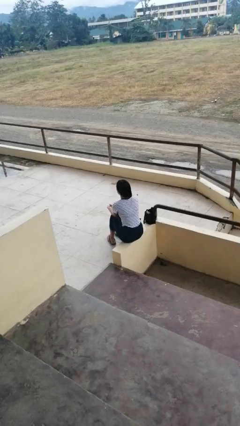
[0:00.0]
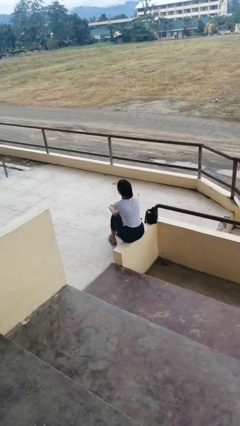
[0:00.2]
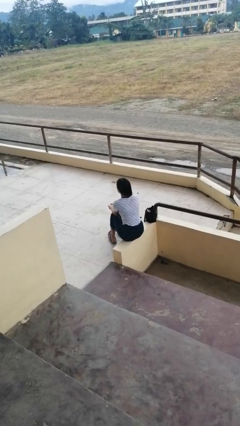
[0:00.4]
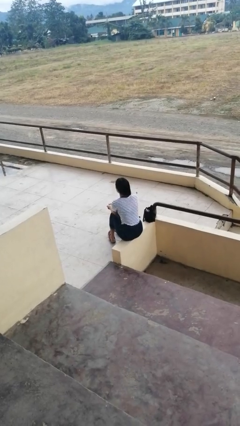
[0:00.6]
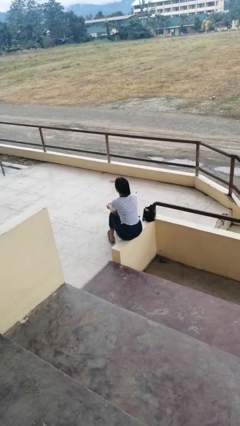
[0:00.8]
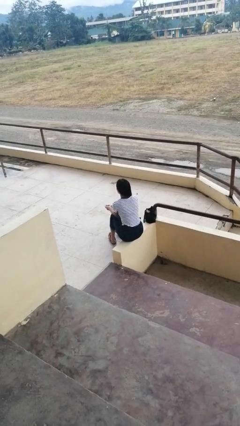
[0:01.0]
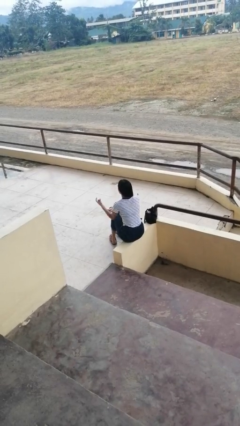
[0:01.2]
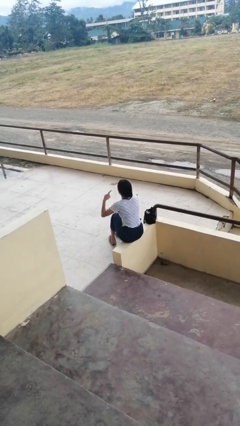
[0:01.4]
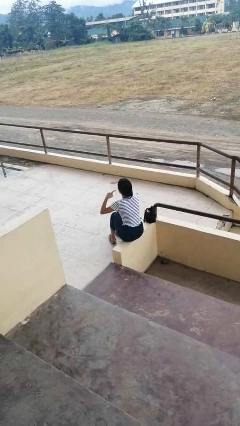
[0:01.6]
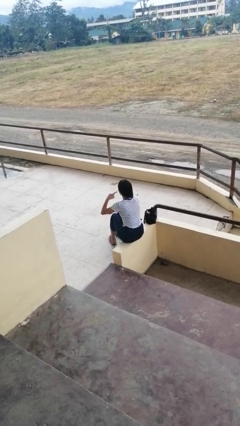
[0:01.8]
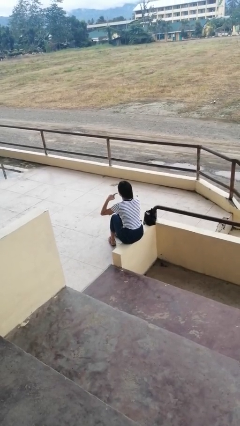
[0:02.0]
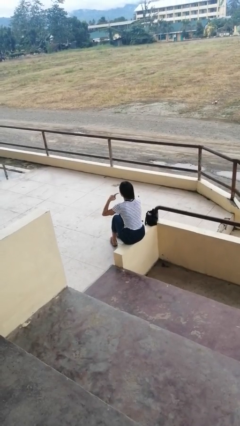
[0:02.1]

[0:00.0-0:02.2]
person gestures listen closely

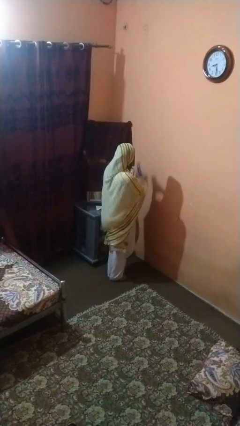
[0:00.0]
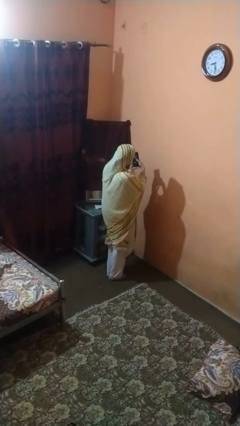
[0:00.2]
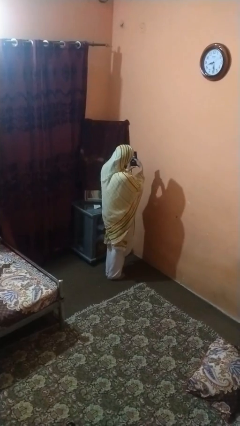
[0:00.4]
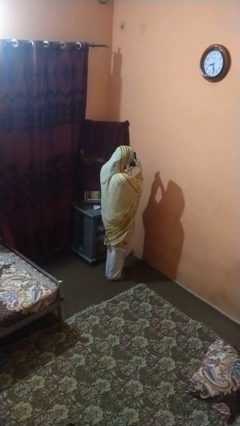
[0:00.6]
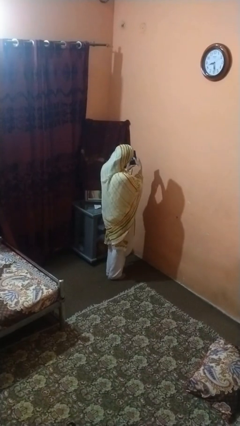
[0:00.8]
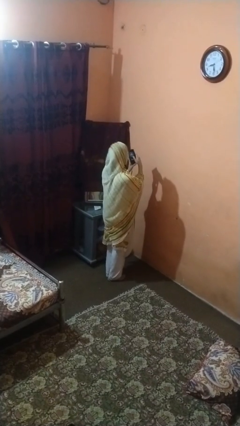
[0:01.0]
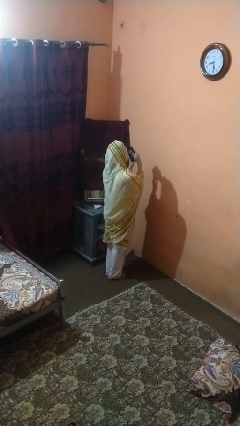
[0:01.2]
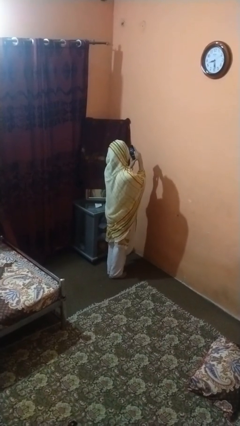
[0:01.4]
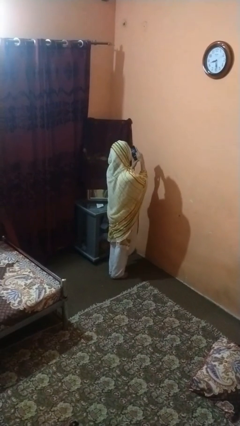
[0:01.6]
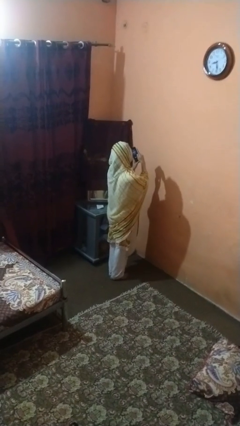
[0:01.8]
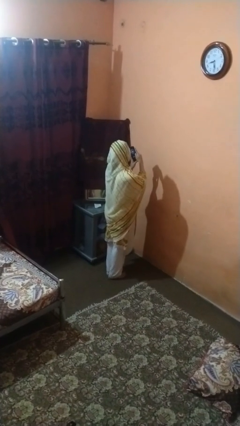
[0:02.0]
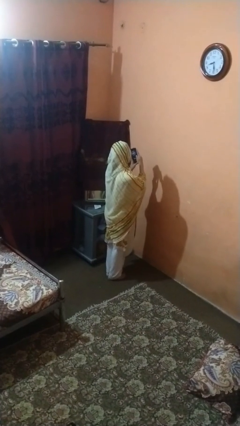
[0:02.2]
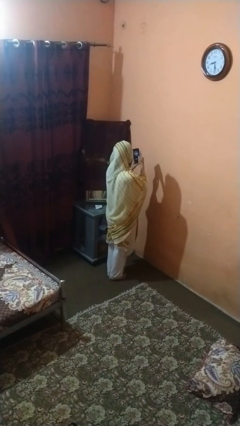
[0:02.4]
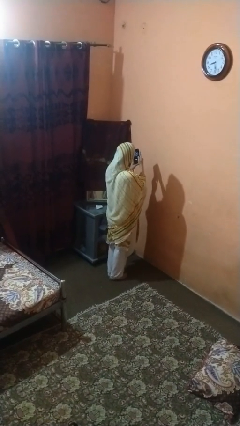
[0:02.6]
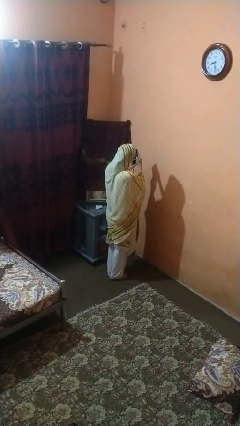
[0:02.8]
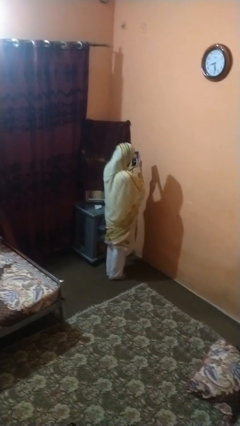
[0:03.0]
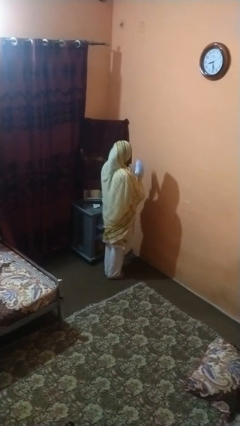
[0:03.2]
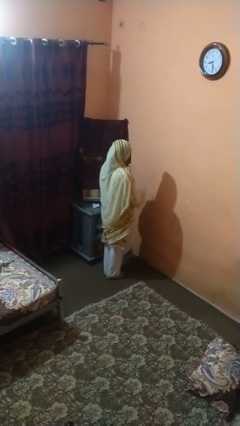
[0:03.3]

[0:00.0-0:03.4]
person takes selfie

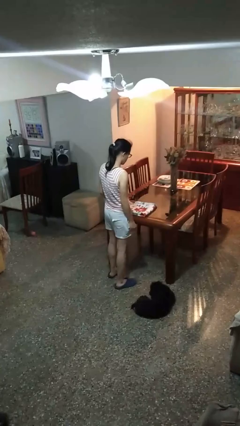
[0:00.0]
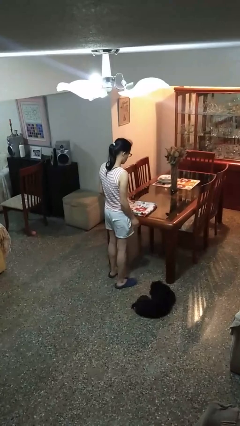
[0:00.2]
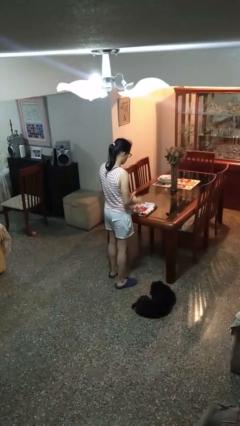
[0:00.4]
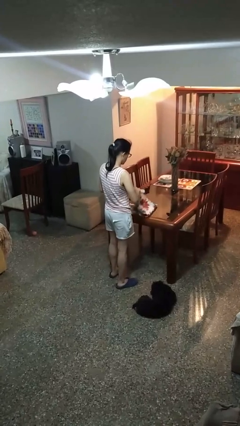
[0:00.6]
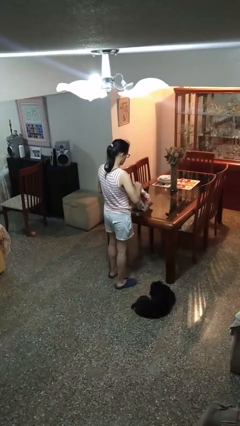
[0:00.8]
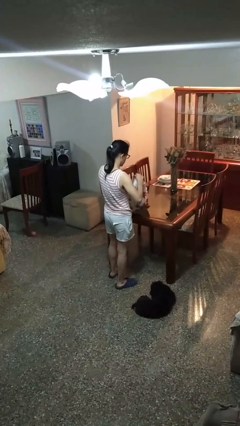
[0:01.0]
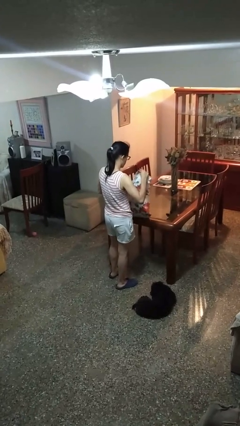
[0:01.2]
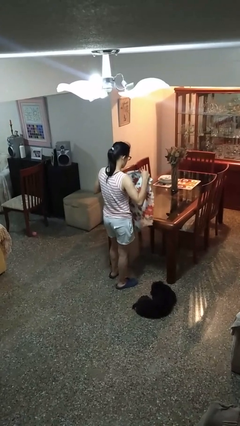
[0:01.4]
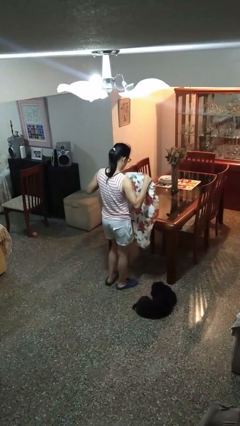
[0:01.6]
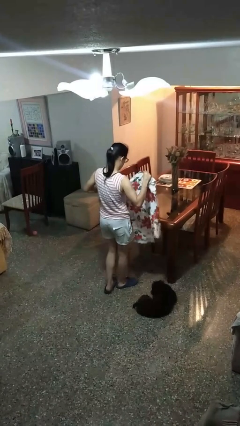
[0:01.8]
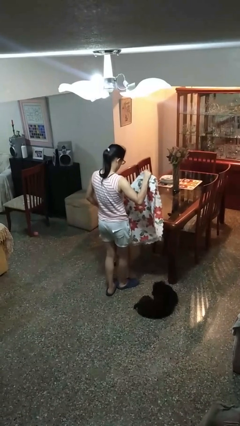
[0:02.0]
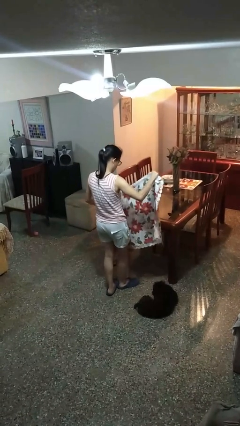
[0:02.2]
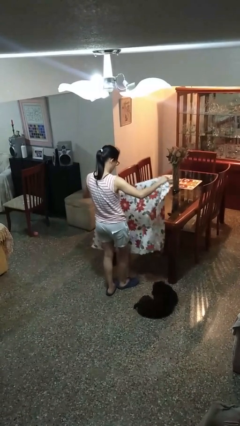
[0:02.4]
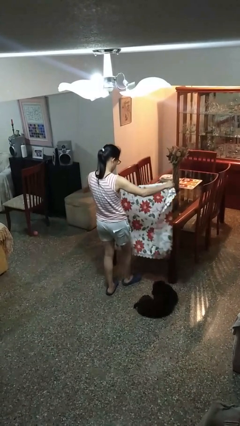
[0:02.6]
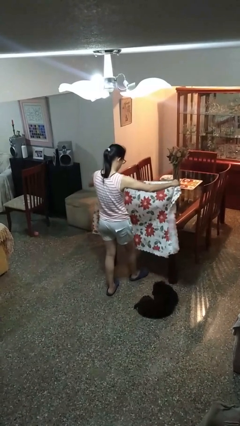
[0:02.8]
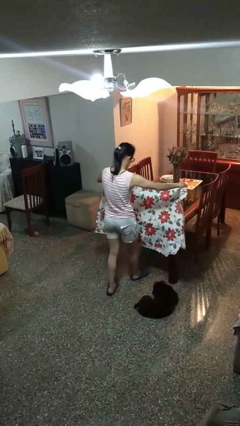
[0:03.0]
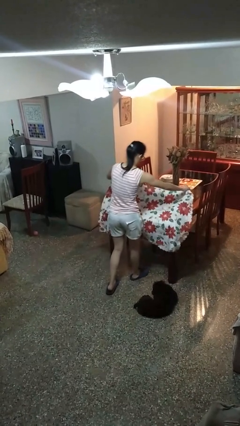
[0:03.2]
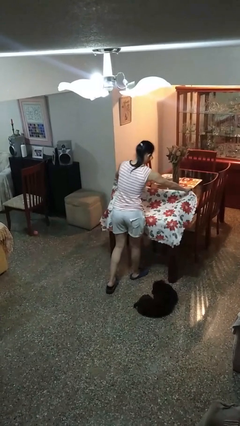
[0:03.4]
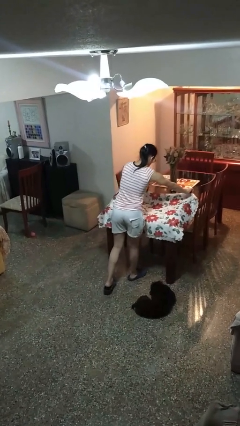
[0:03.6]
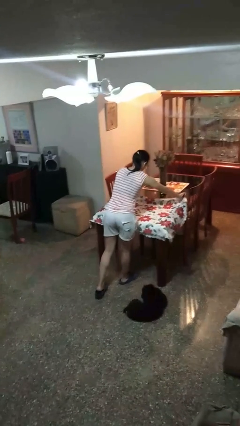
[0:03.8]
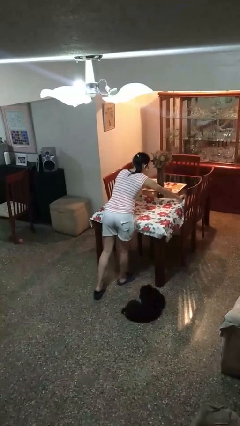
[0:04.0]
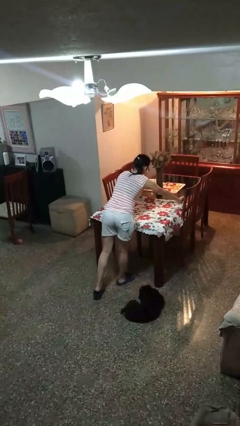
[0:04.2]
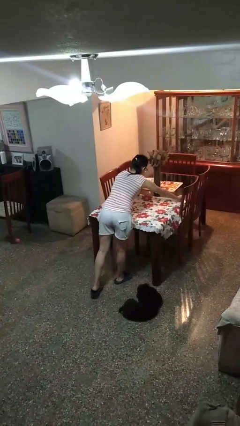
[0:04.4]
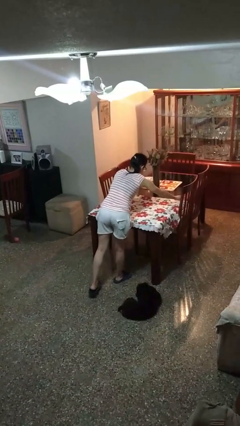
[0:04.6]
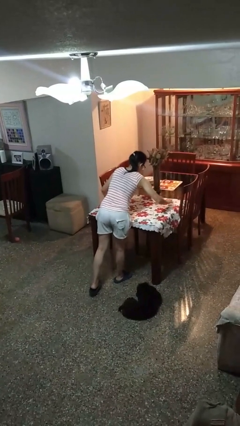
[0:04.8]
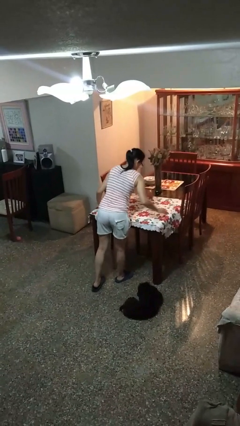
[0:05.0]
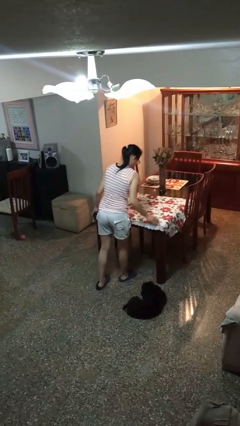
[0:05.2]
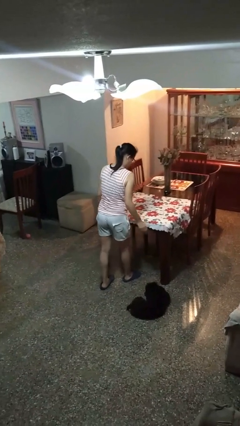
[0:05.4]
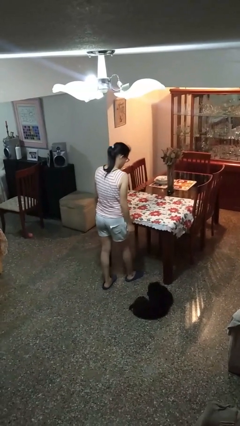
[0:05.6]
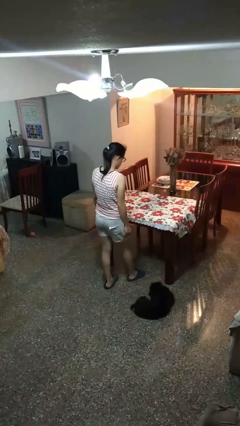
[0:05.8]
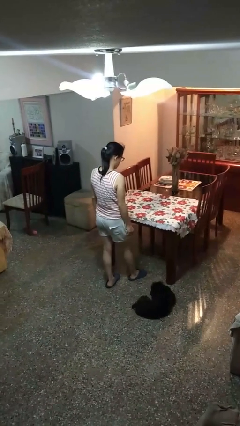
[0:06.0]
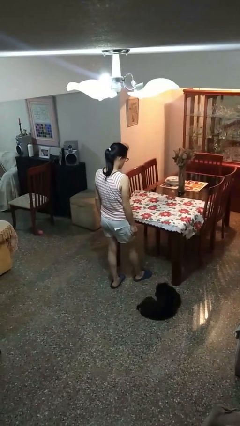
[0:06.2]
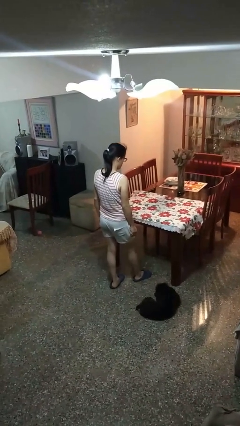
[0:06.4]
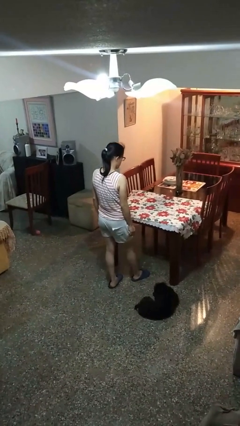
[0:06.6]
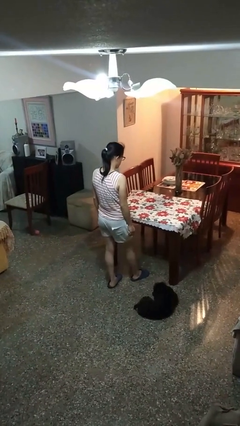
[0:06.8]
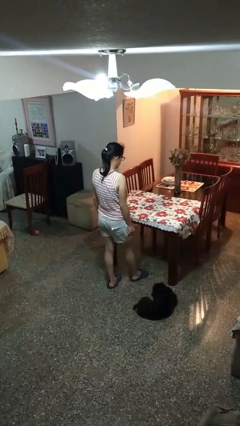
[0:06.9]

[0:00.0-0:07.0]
person spreads tablecloth

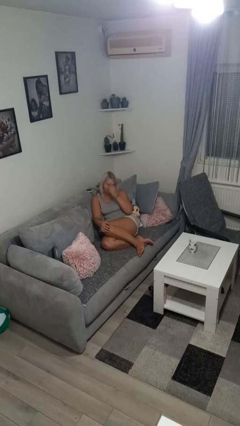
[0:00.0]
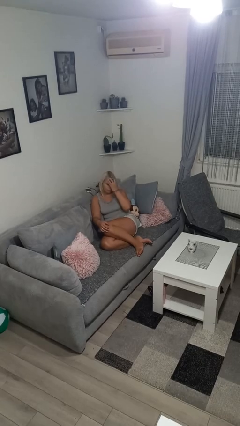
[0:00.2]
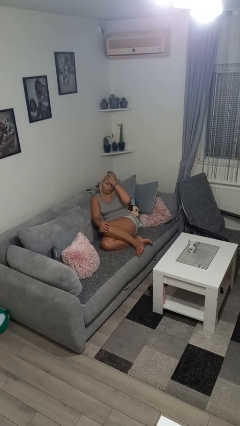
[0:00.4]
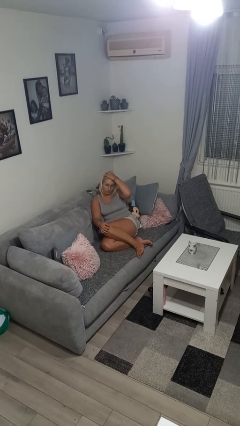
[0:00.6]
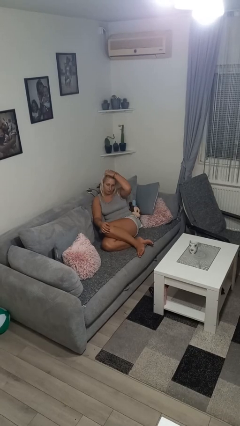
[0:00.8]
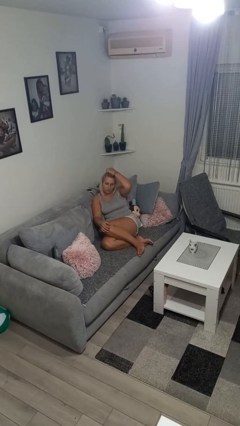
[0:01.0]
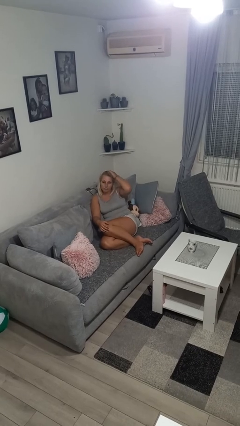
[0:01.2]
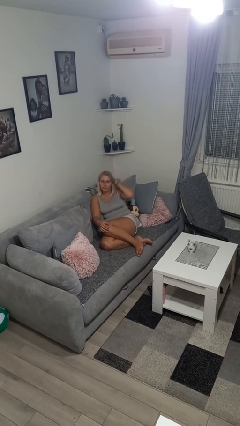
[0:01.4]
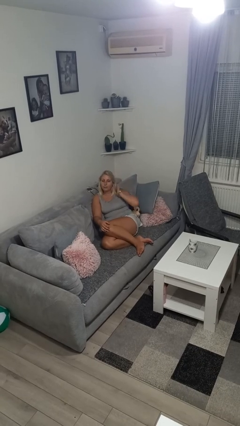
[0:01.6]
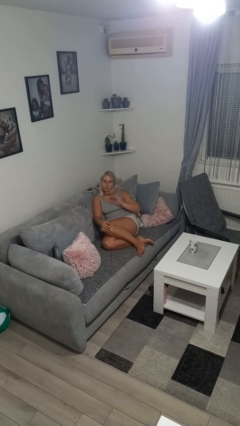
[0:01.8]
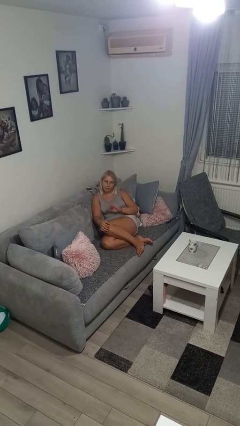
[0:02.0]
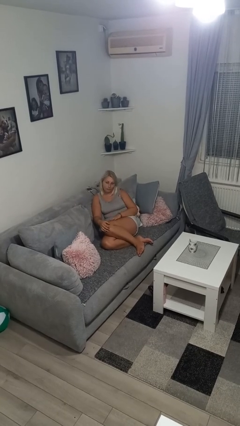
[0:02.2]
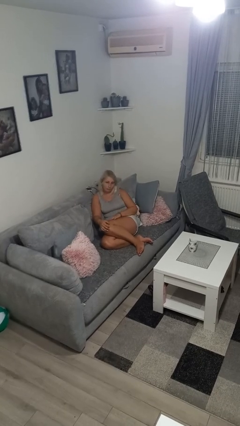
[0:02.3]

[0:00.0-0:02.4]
person strokes hair

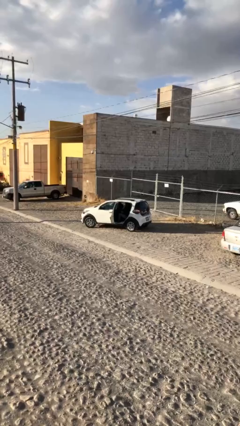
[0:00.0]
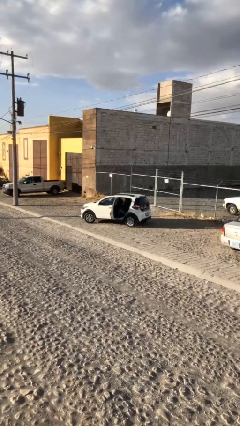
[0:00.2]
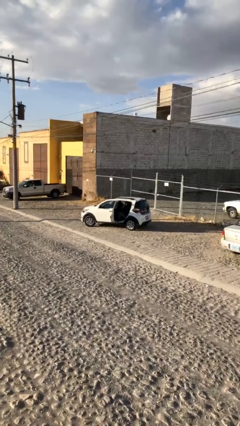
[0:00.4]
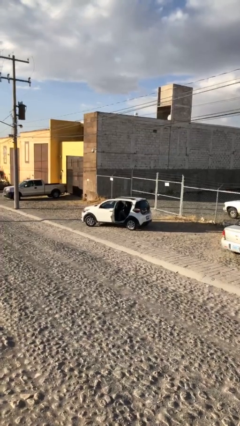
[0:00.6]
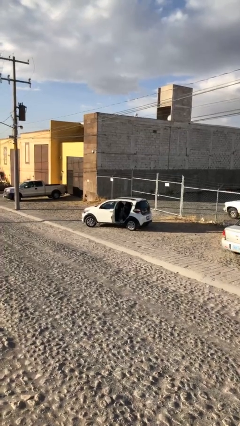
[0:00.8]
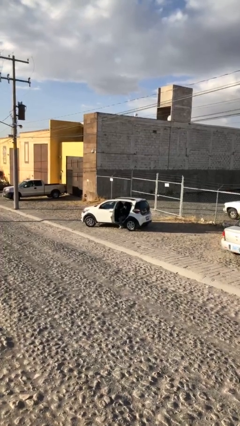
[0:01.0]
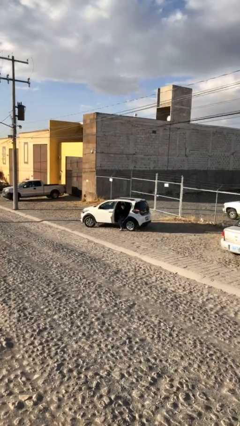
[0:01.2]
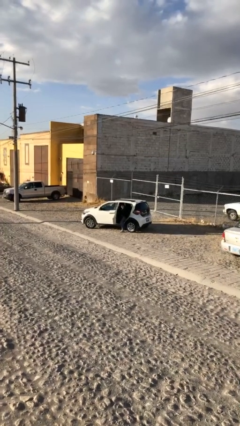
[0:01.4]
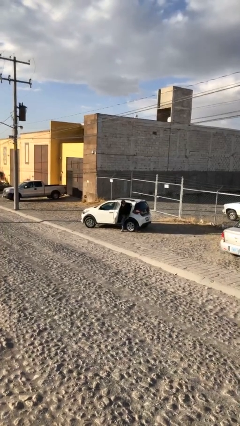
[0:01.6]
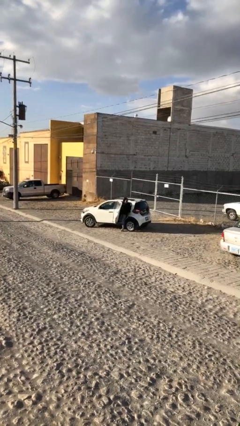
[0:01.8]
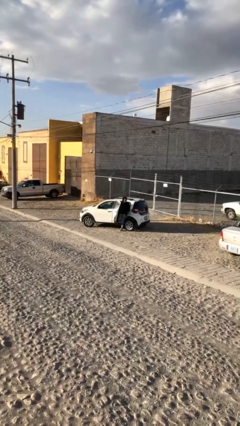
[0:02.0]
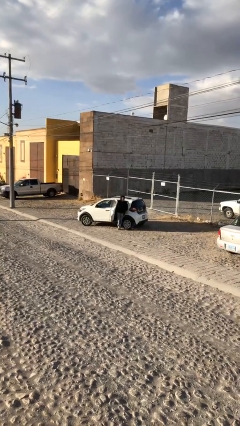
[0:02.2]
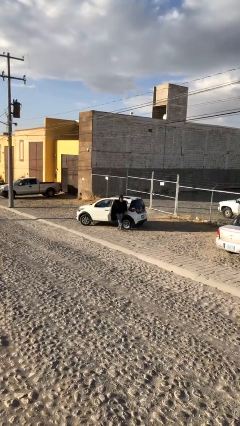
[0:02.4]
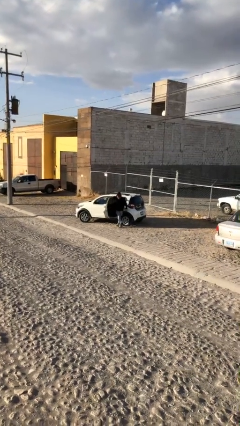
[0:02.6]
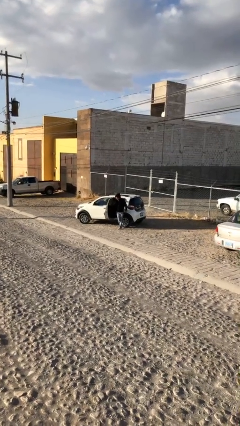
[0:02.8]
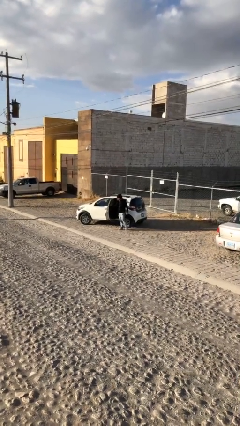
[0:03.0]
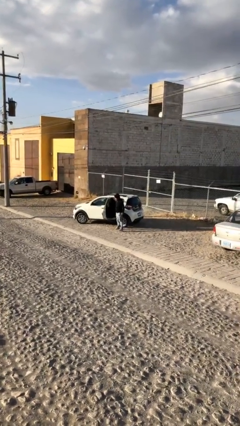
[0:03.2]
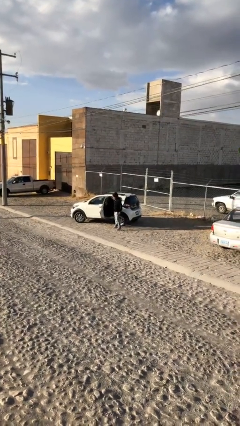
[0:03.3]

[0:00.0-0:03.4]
person exits car
